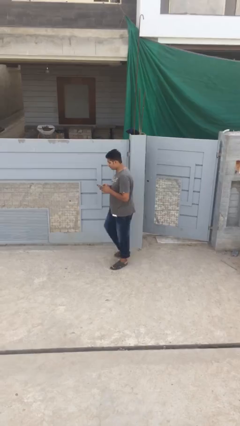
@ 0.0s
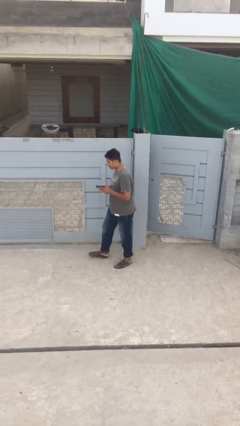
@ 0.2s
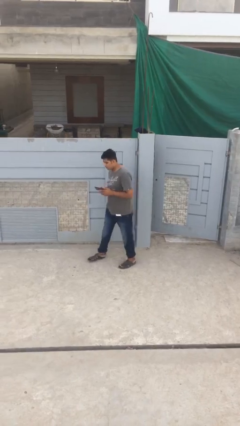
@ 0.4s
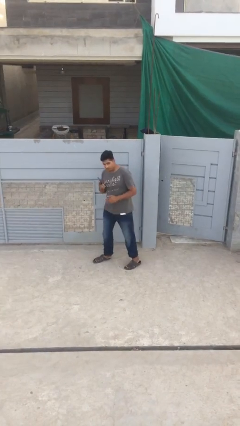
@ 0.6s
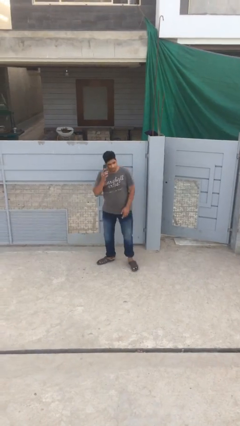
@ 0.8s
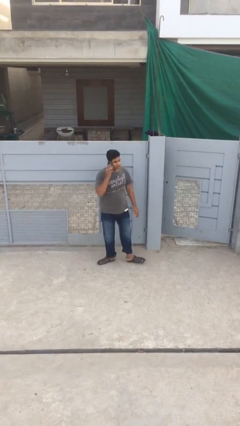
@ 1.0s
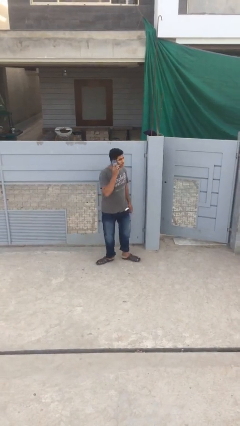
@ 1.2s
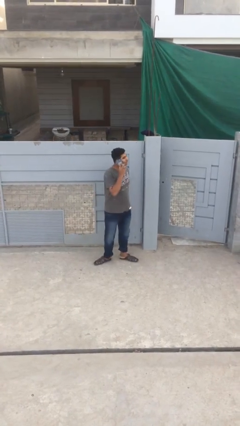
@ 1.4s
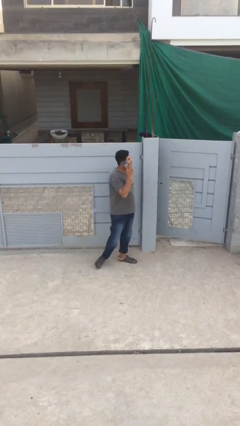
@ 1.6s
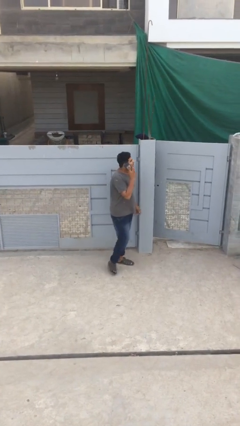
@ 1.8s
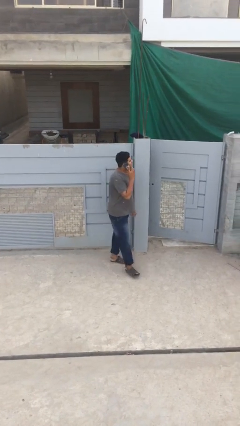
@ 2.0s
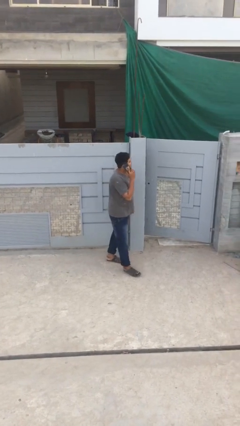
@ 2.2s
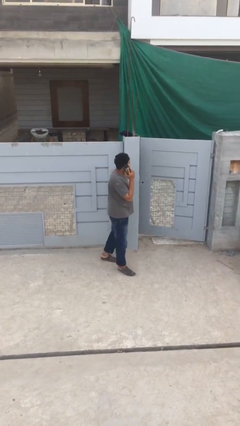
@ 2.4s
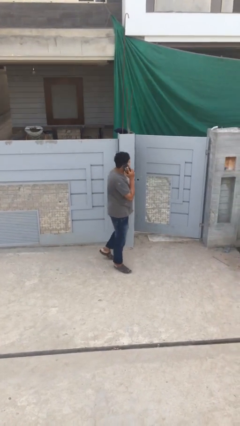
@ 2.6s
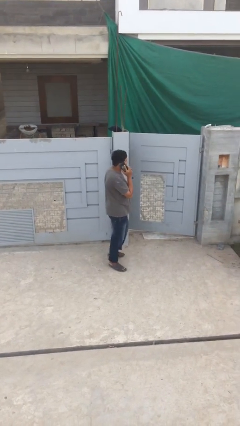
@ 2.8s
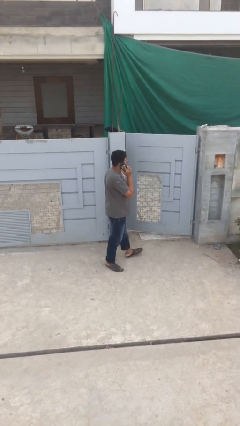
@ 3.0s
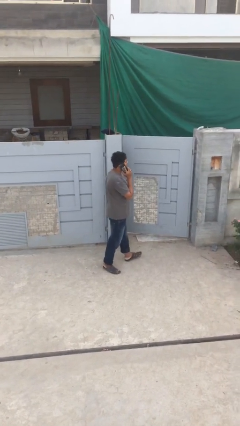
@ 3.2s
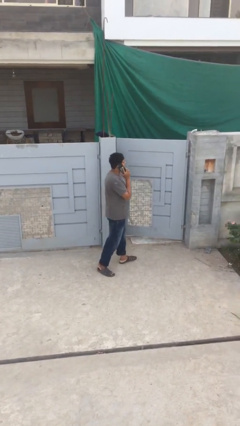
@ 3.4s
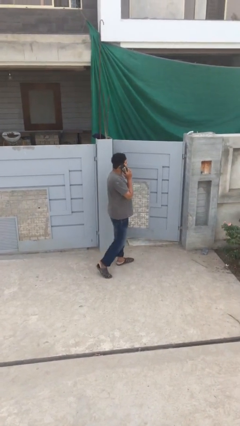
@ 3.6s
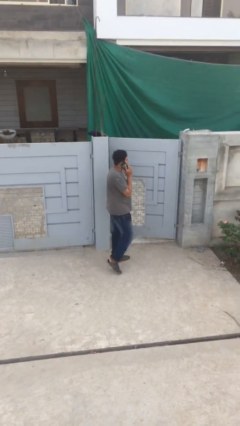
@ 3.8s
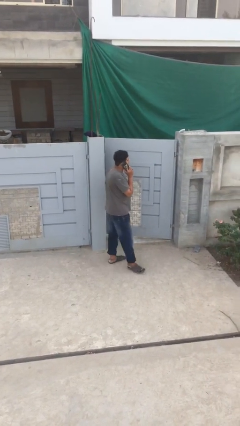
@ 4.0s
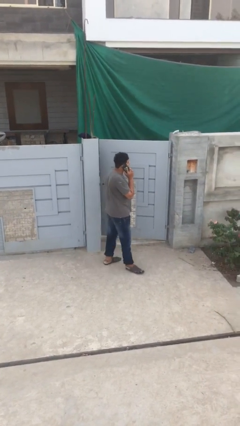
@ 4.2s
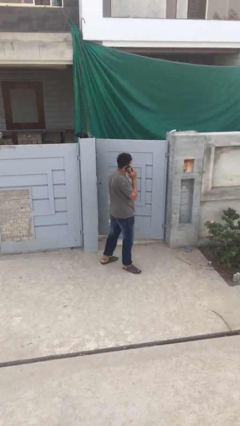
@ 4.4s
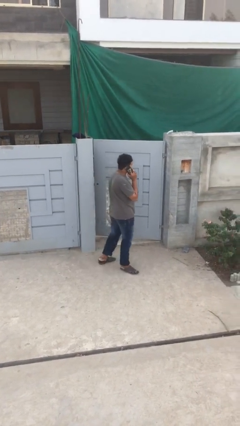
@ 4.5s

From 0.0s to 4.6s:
person talks on phone

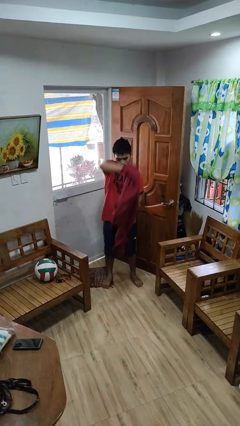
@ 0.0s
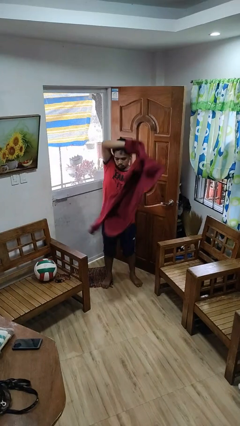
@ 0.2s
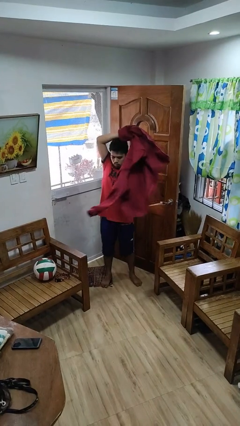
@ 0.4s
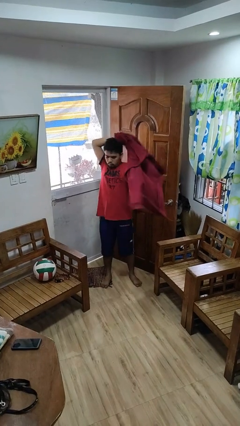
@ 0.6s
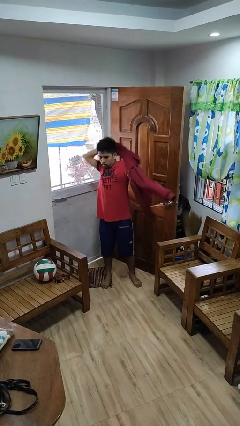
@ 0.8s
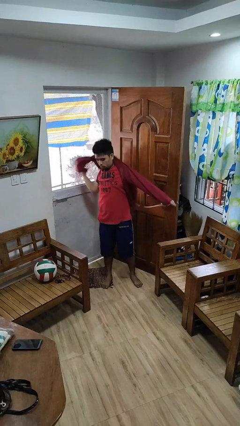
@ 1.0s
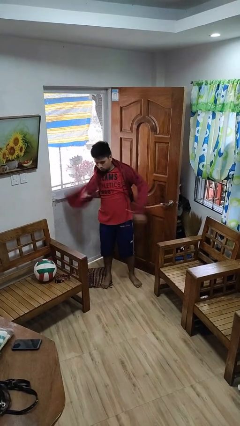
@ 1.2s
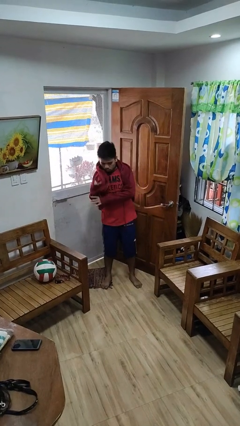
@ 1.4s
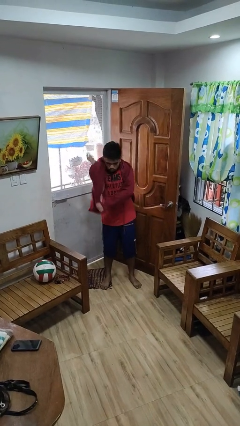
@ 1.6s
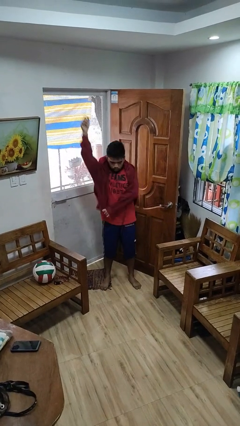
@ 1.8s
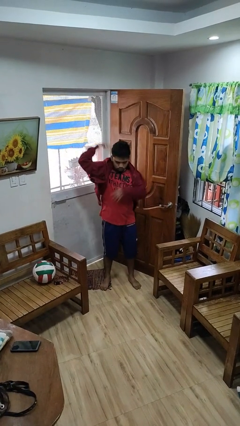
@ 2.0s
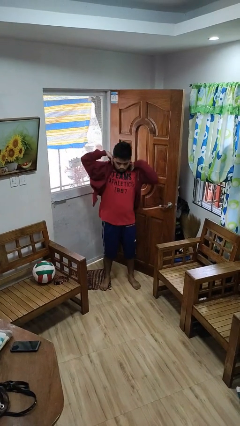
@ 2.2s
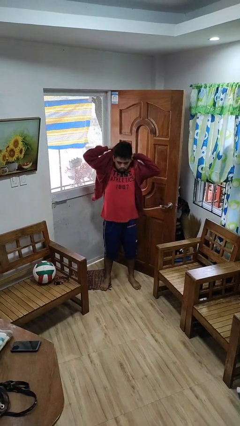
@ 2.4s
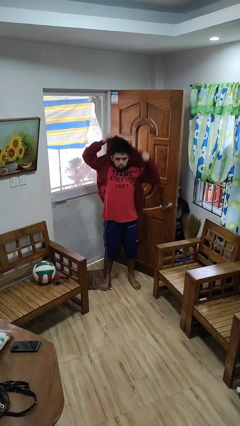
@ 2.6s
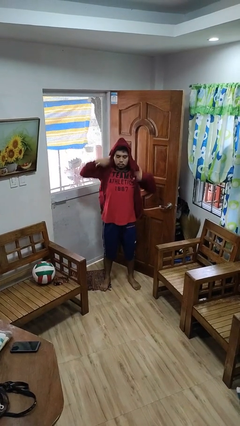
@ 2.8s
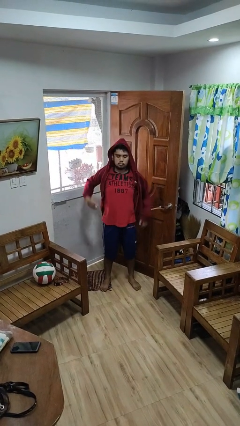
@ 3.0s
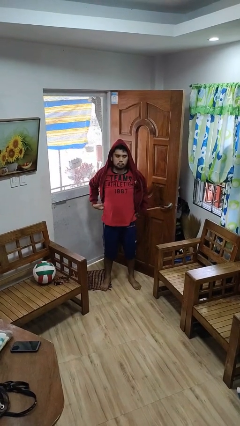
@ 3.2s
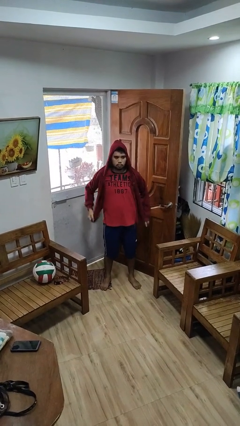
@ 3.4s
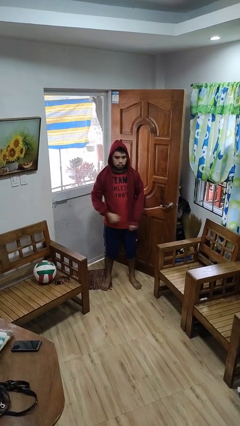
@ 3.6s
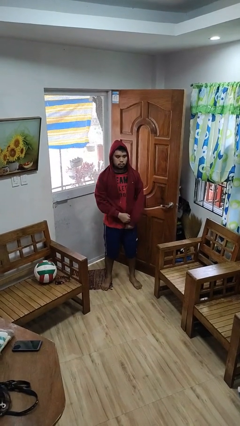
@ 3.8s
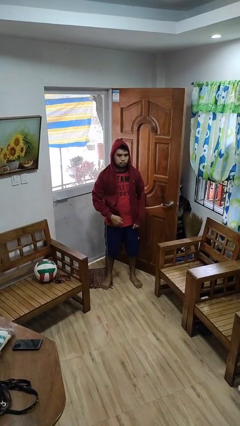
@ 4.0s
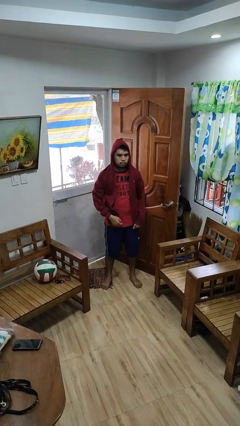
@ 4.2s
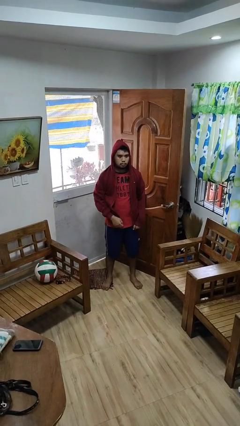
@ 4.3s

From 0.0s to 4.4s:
person puts on hoodie

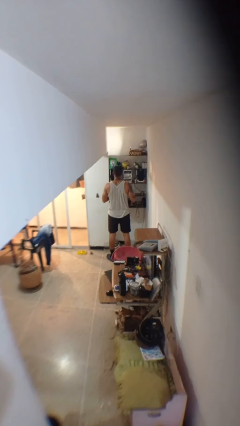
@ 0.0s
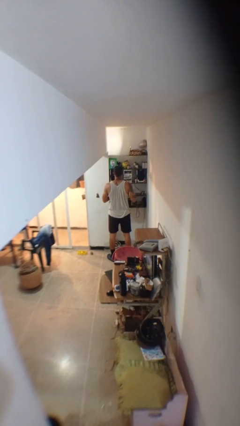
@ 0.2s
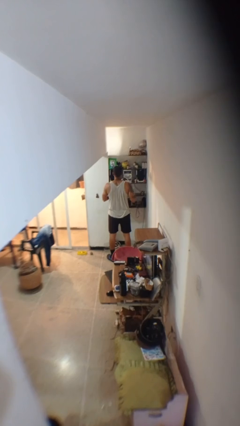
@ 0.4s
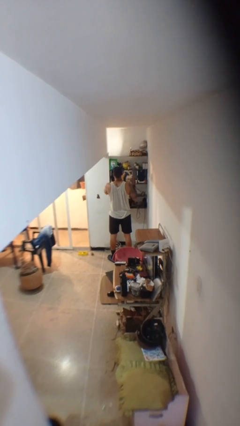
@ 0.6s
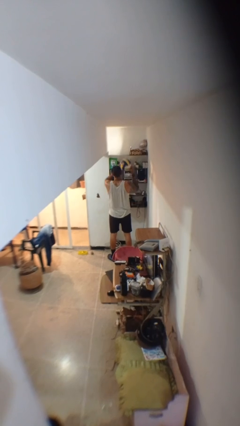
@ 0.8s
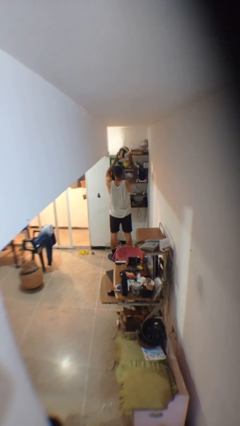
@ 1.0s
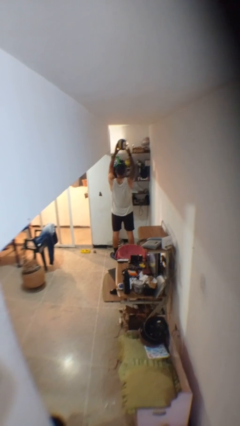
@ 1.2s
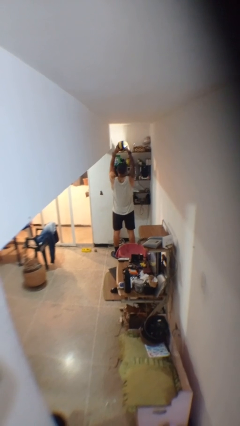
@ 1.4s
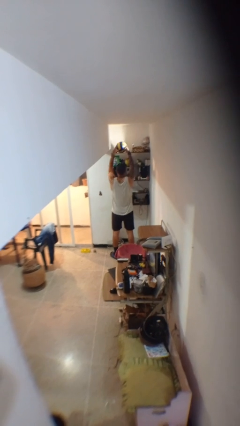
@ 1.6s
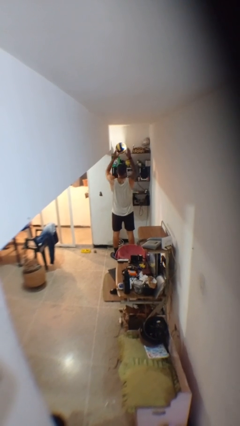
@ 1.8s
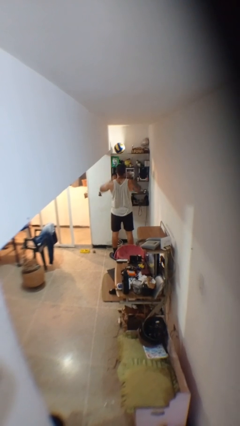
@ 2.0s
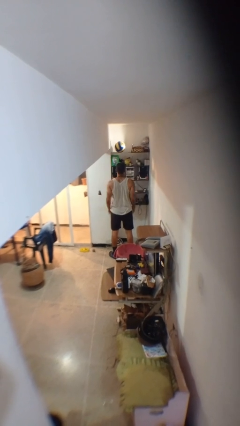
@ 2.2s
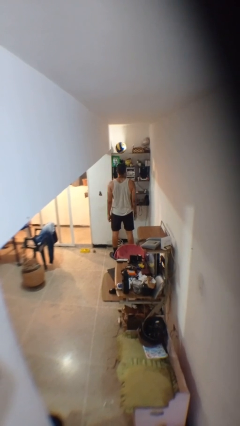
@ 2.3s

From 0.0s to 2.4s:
person puts down object on shelf

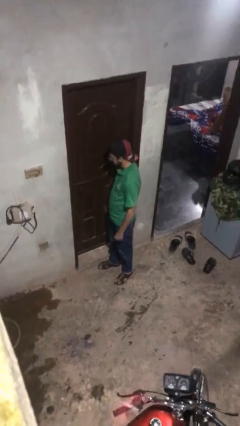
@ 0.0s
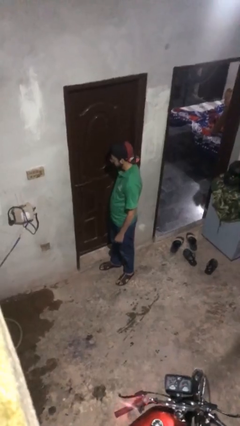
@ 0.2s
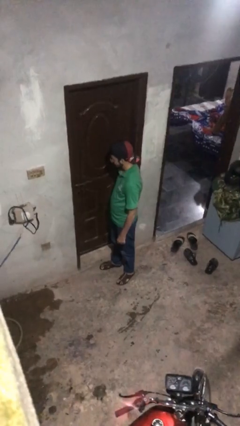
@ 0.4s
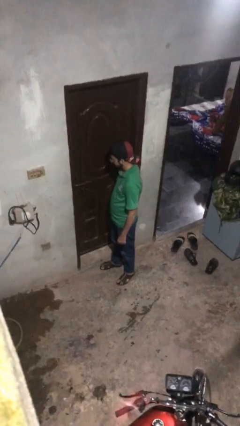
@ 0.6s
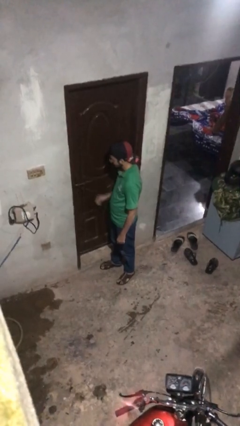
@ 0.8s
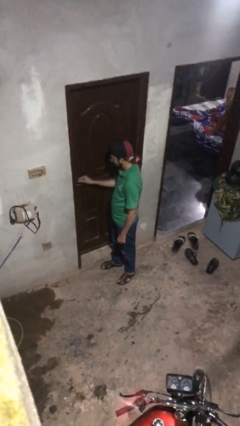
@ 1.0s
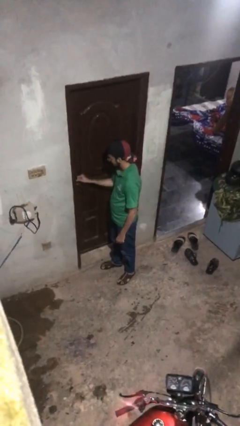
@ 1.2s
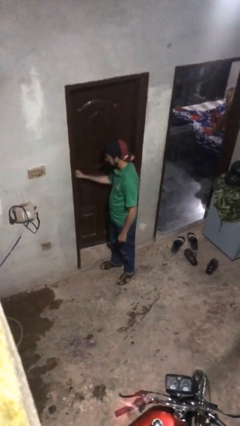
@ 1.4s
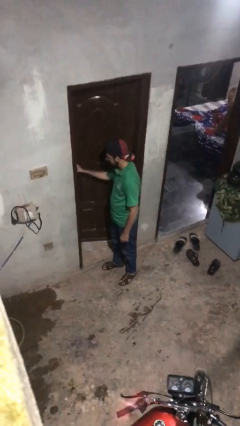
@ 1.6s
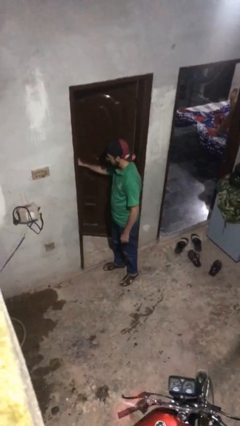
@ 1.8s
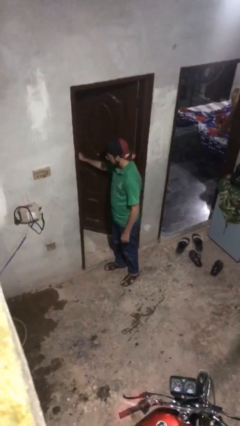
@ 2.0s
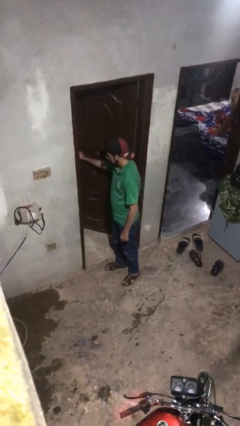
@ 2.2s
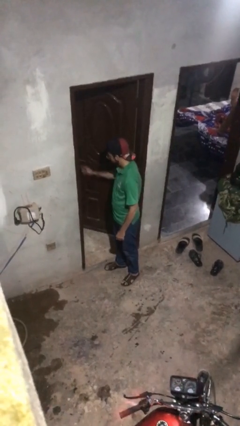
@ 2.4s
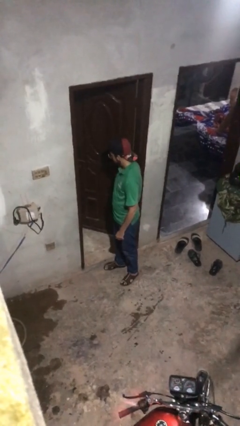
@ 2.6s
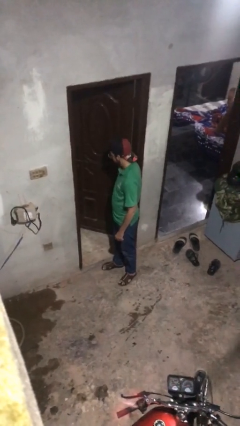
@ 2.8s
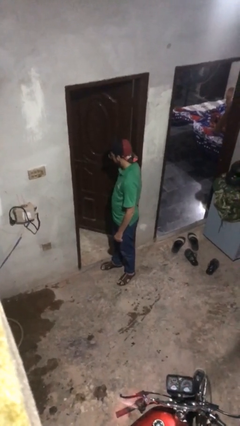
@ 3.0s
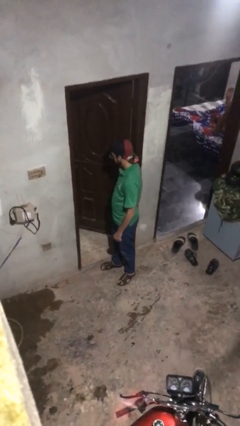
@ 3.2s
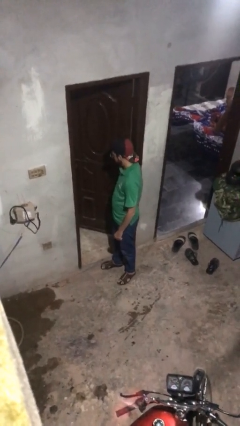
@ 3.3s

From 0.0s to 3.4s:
person opens facility door

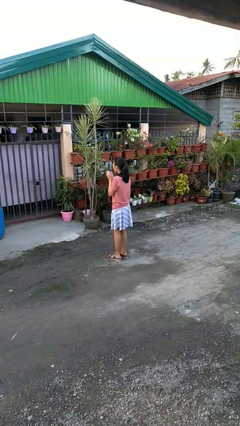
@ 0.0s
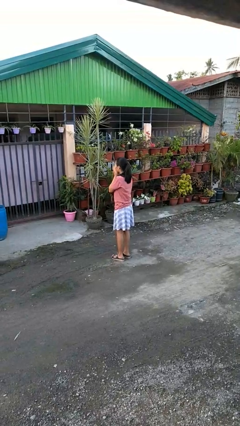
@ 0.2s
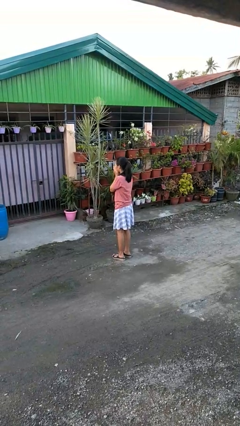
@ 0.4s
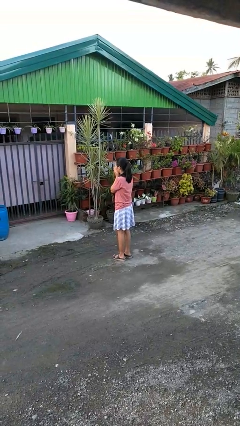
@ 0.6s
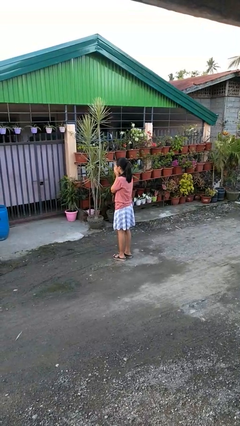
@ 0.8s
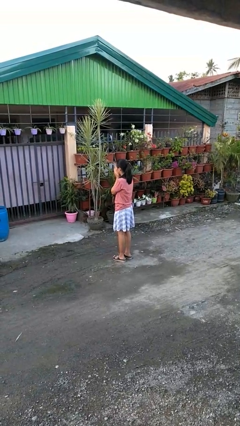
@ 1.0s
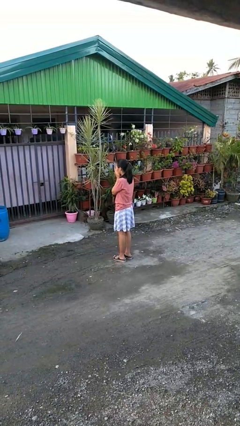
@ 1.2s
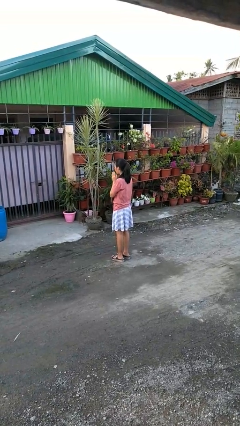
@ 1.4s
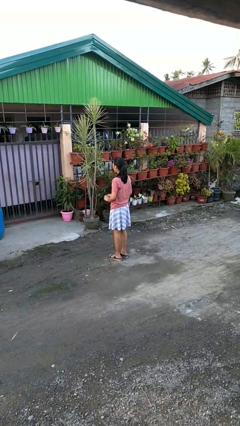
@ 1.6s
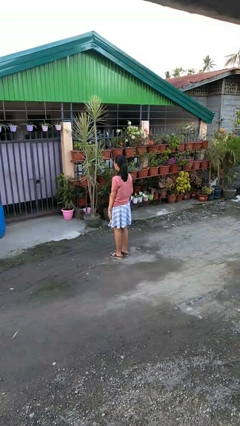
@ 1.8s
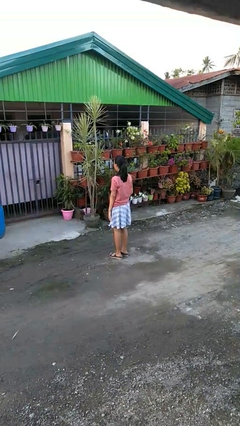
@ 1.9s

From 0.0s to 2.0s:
person blows into hands

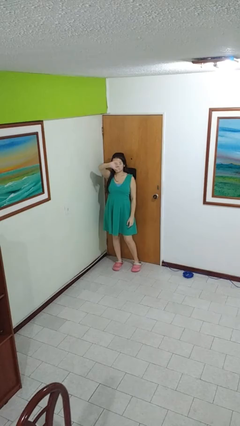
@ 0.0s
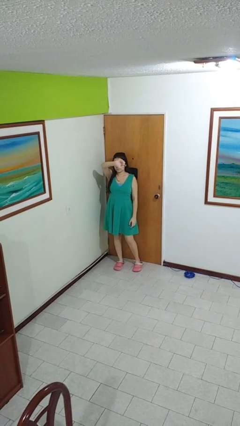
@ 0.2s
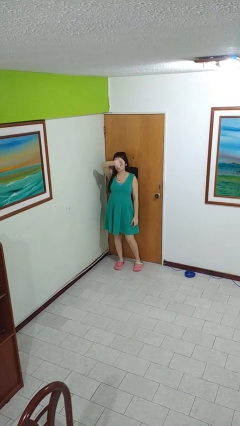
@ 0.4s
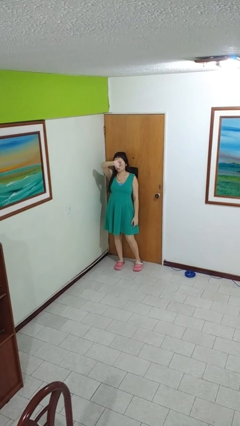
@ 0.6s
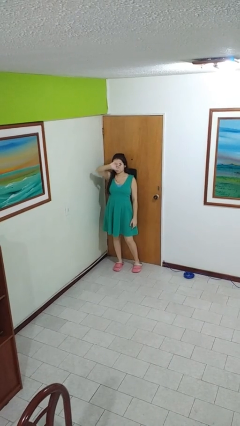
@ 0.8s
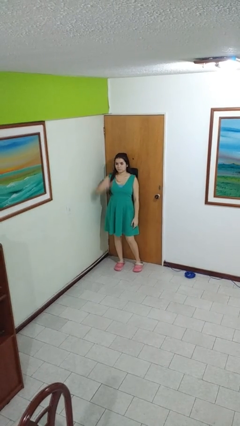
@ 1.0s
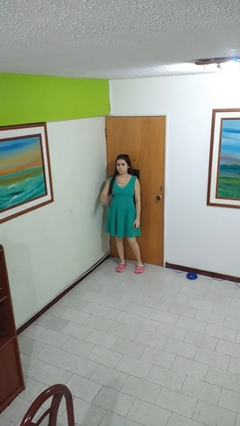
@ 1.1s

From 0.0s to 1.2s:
person gestures thumbs down
